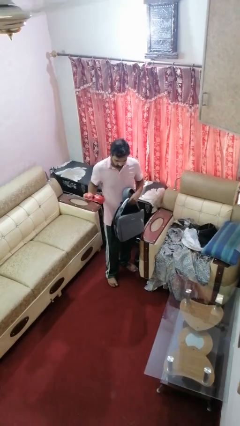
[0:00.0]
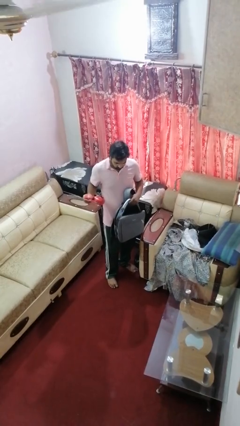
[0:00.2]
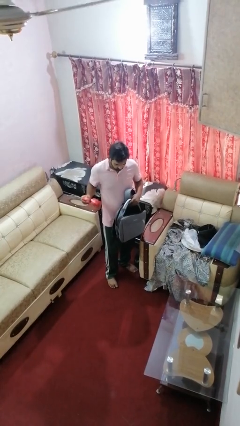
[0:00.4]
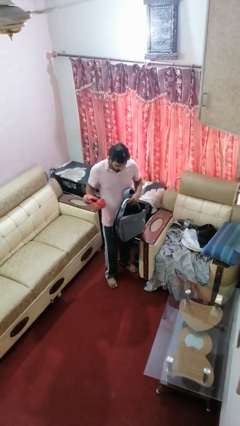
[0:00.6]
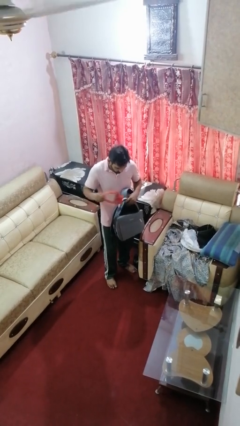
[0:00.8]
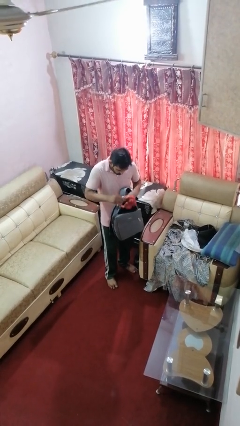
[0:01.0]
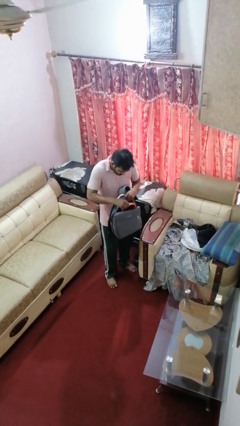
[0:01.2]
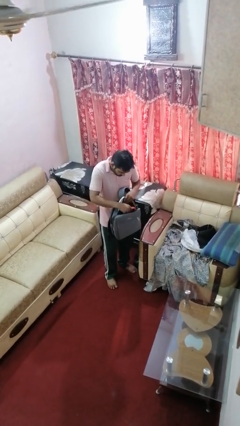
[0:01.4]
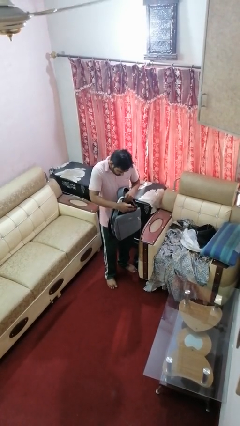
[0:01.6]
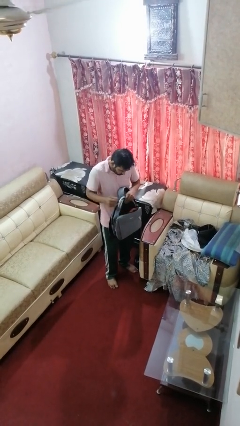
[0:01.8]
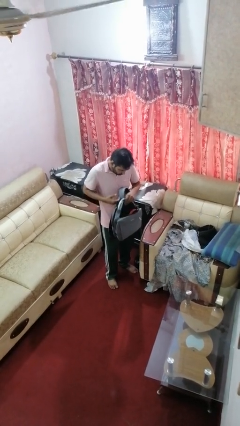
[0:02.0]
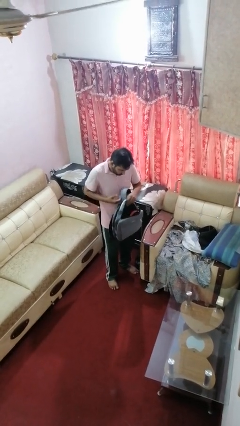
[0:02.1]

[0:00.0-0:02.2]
person puts object into backpack

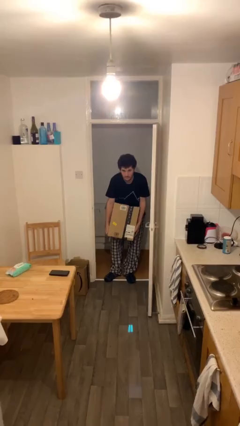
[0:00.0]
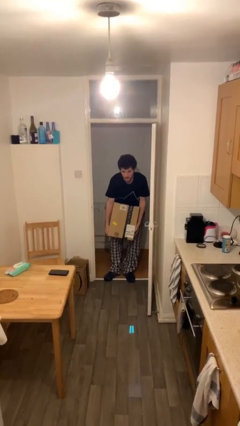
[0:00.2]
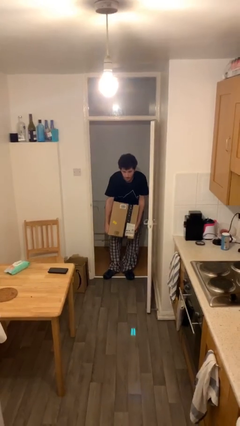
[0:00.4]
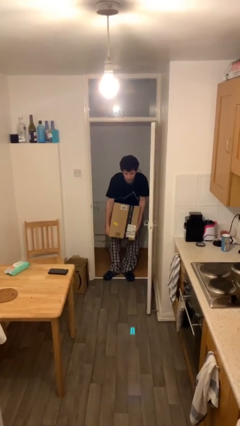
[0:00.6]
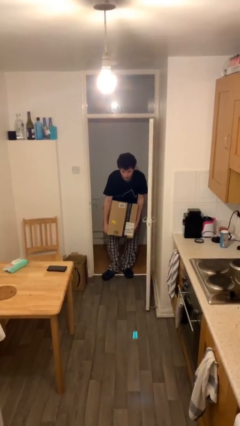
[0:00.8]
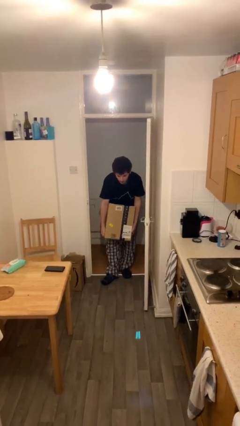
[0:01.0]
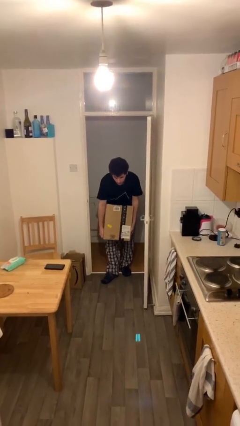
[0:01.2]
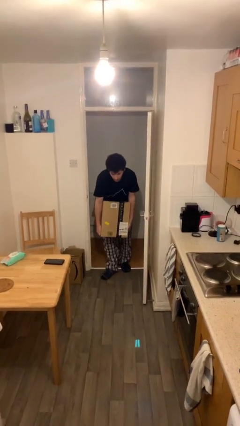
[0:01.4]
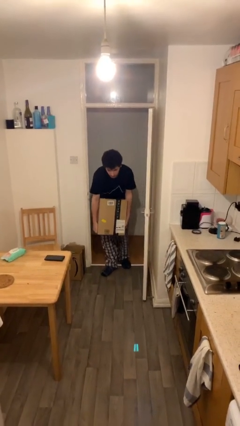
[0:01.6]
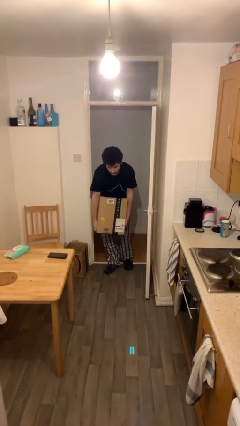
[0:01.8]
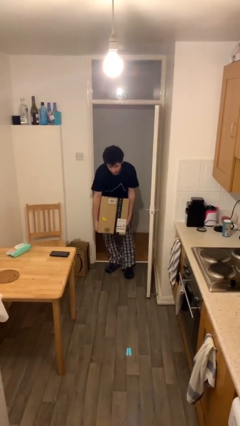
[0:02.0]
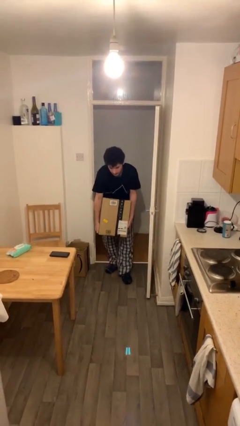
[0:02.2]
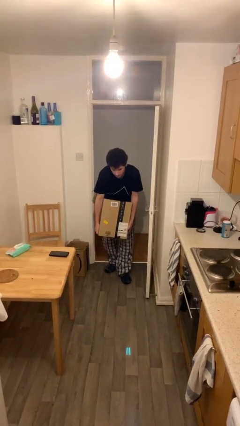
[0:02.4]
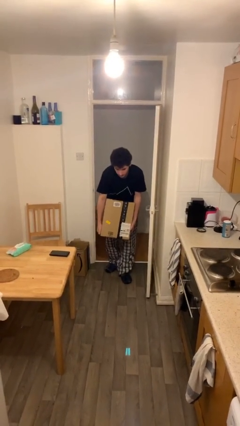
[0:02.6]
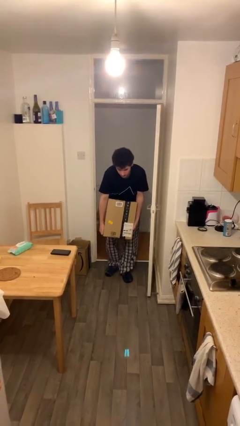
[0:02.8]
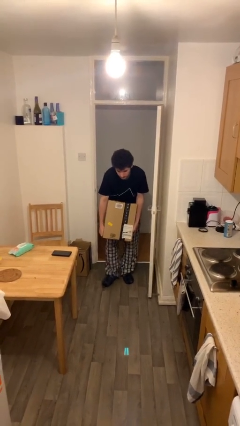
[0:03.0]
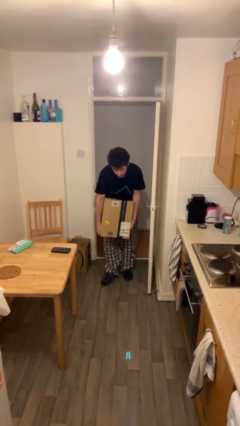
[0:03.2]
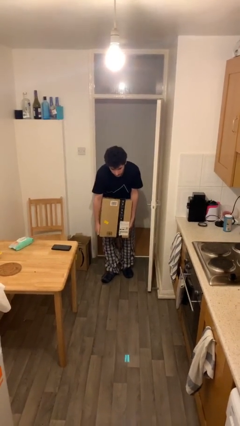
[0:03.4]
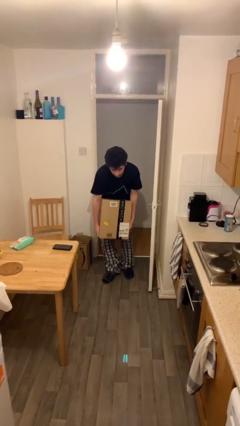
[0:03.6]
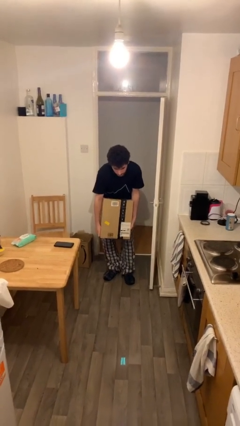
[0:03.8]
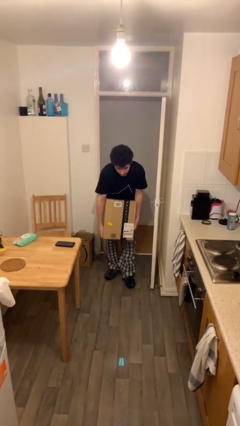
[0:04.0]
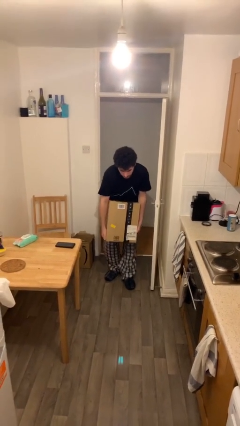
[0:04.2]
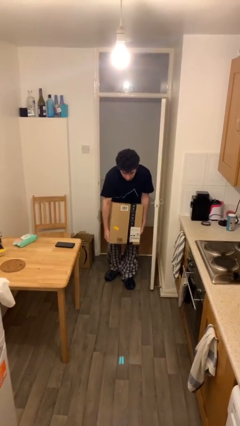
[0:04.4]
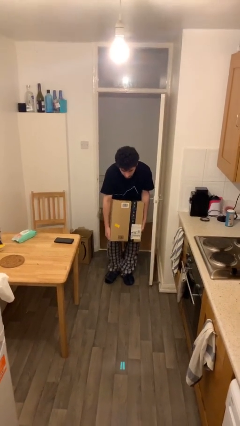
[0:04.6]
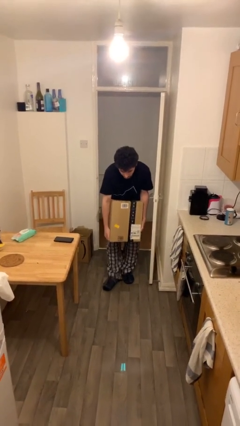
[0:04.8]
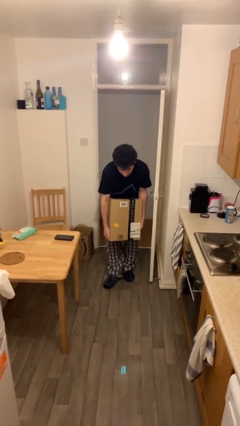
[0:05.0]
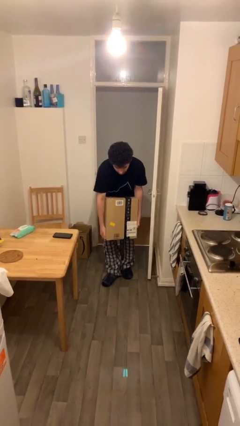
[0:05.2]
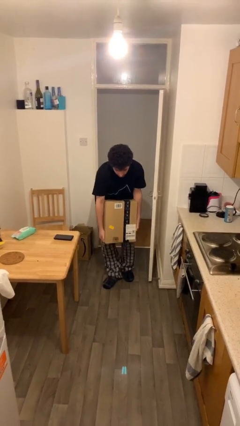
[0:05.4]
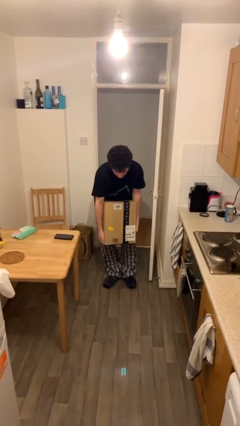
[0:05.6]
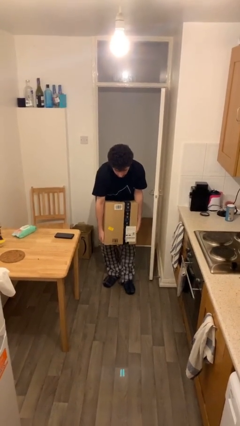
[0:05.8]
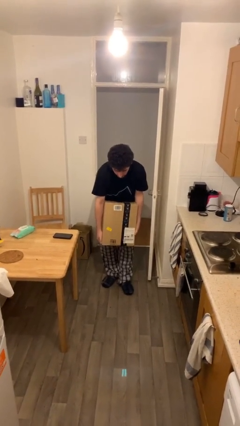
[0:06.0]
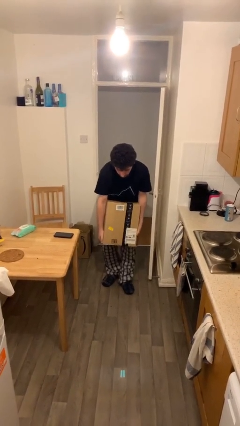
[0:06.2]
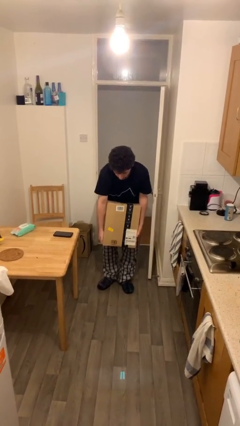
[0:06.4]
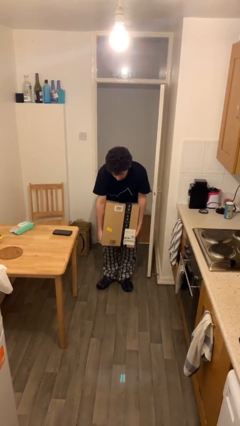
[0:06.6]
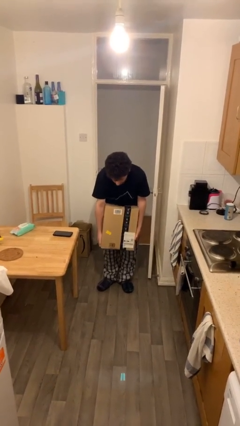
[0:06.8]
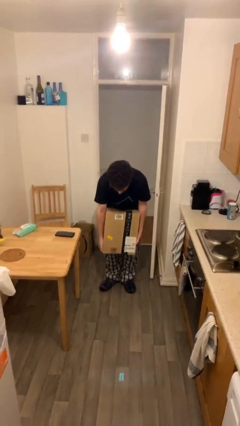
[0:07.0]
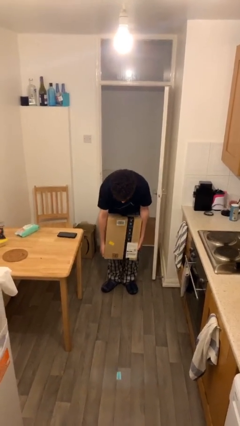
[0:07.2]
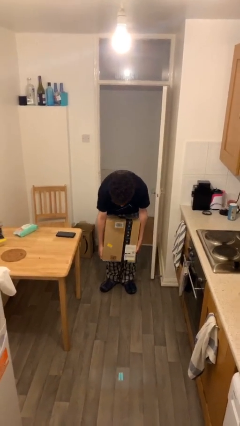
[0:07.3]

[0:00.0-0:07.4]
person carries heavy object

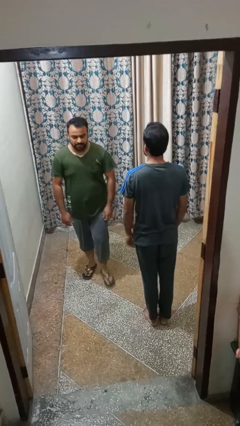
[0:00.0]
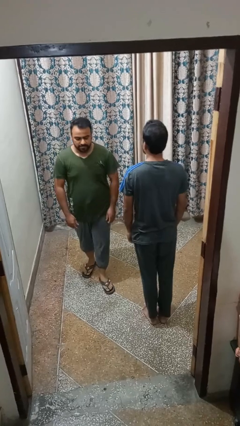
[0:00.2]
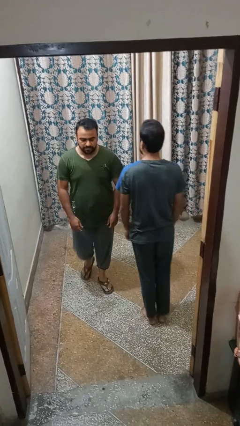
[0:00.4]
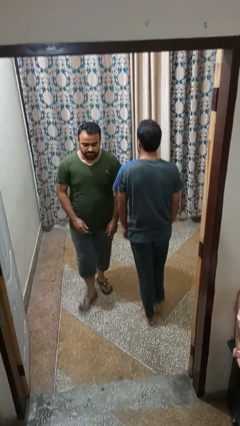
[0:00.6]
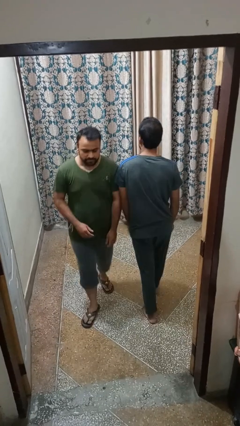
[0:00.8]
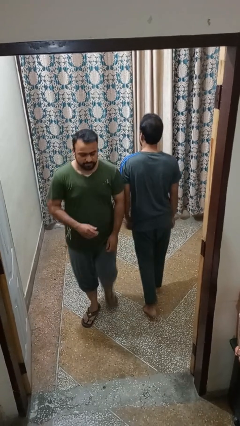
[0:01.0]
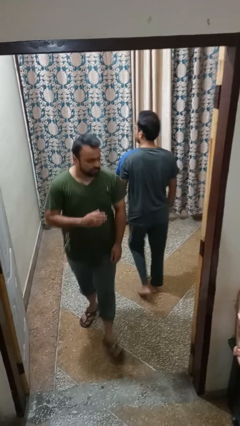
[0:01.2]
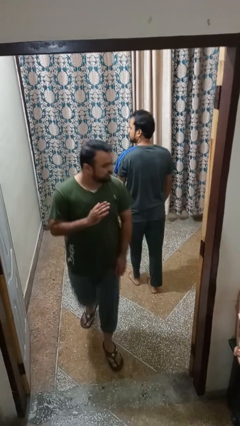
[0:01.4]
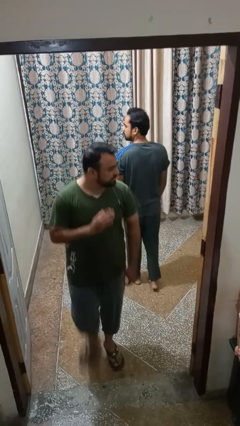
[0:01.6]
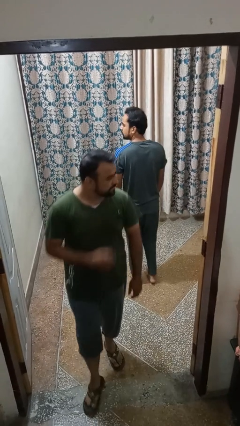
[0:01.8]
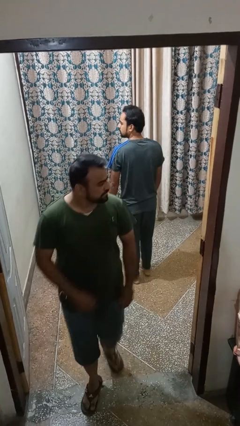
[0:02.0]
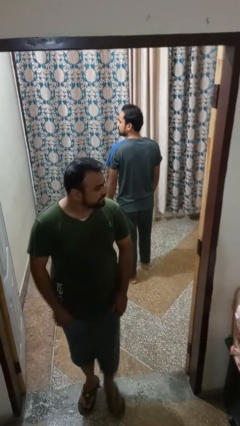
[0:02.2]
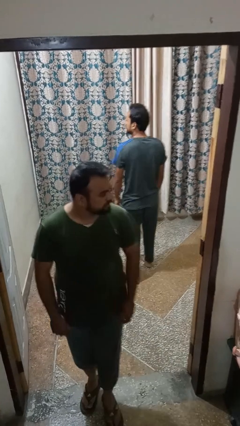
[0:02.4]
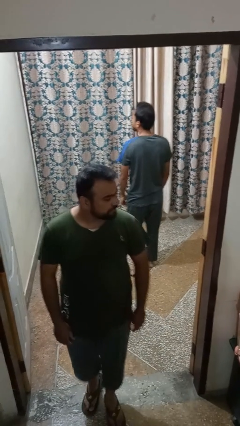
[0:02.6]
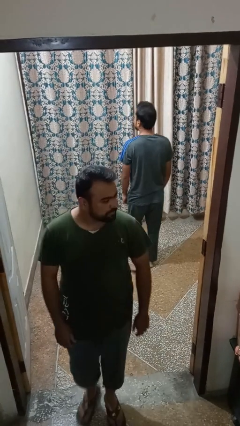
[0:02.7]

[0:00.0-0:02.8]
person bumps into person

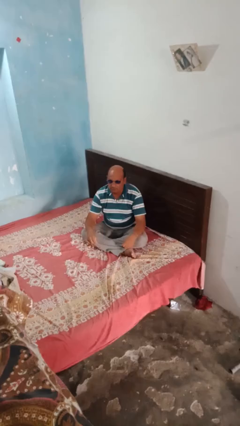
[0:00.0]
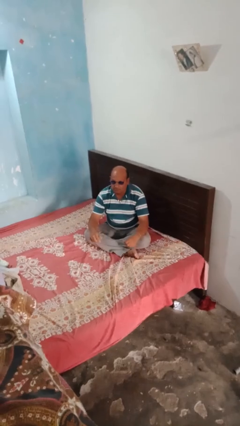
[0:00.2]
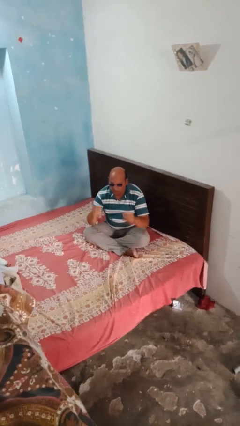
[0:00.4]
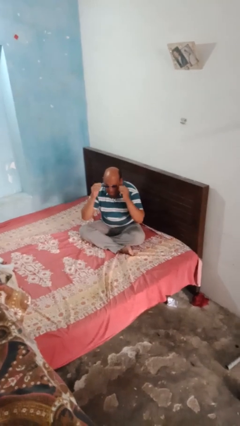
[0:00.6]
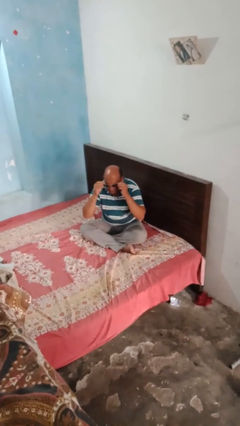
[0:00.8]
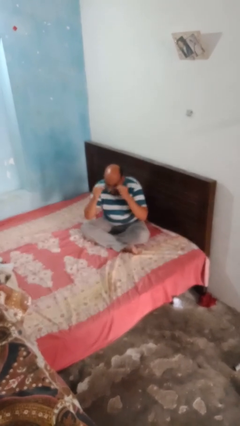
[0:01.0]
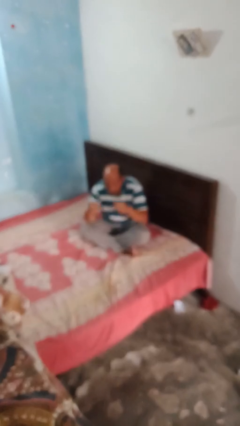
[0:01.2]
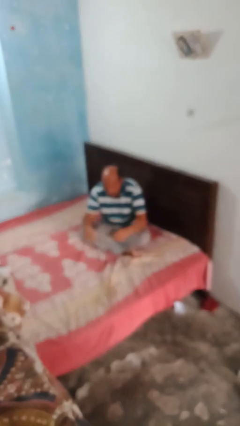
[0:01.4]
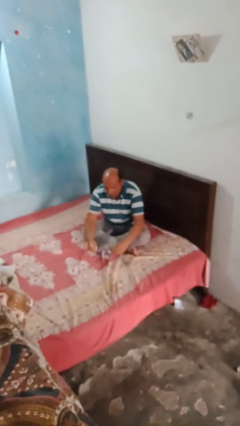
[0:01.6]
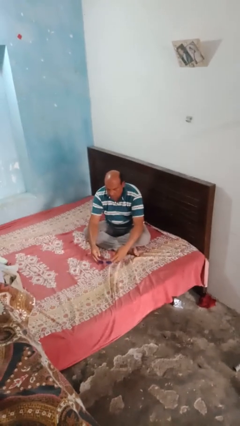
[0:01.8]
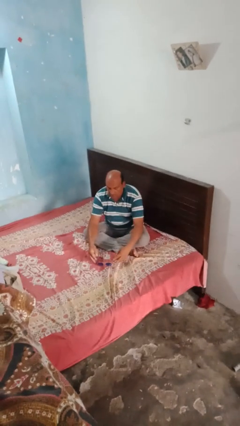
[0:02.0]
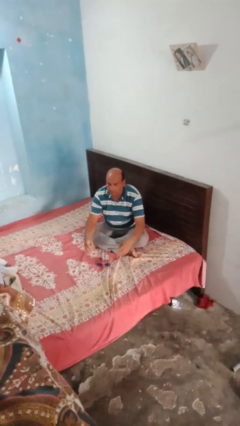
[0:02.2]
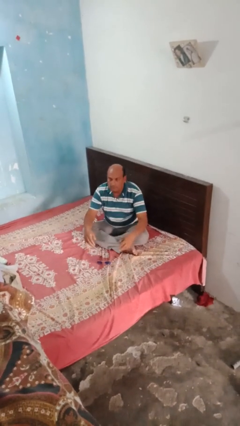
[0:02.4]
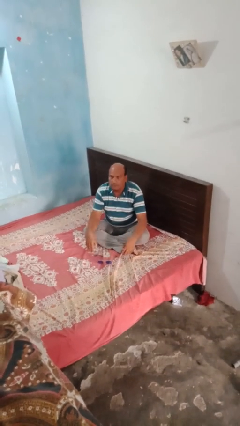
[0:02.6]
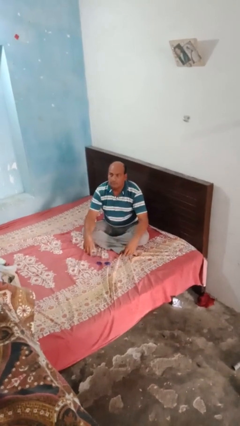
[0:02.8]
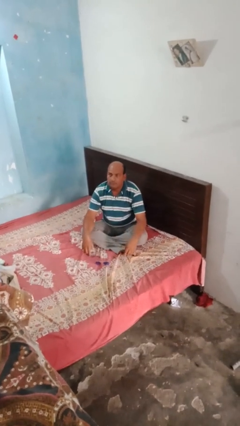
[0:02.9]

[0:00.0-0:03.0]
person takes off sunglasses

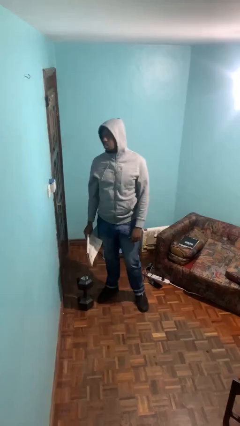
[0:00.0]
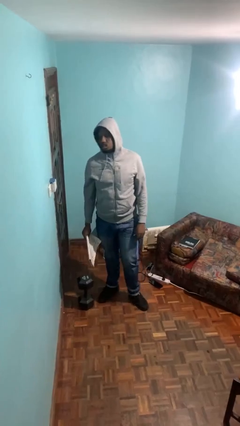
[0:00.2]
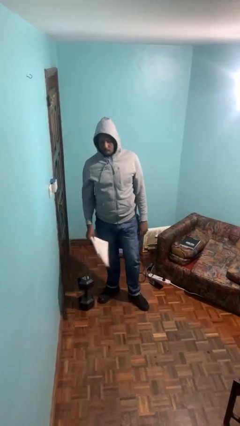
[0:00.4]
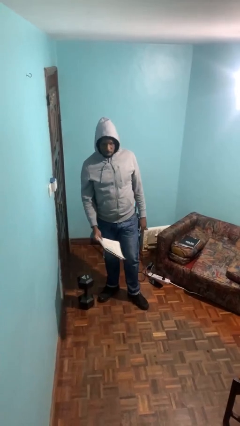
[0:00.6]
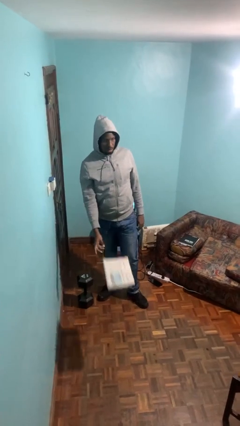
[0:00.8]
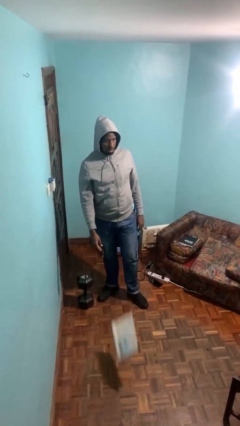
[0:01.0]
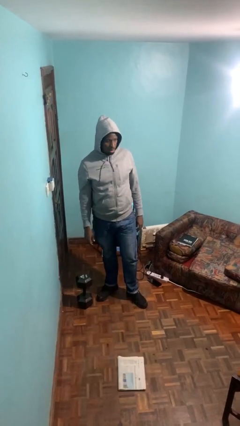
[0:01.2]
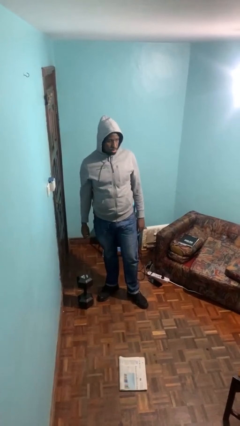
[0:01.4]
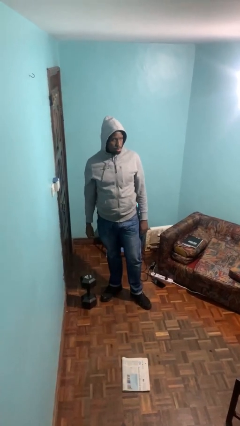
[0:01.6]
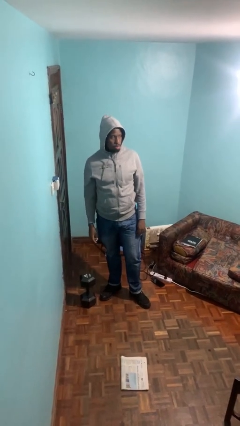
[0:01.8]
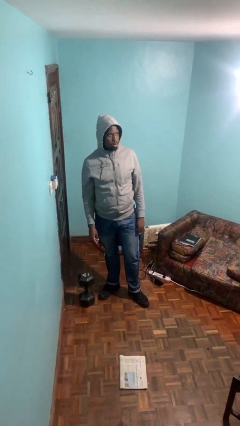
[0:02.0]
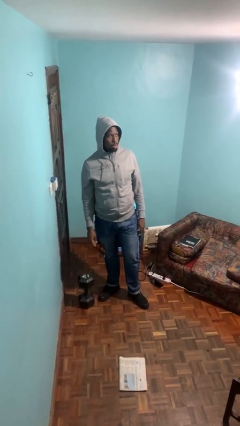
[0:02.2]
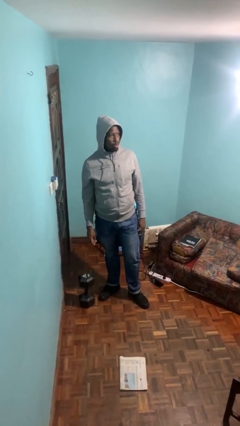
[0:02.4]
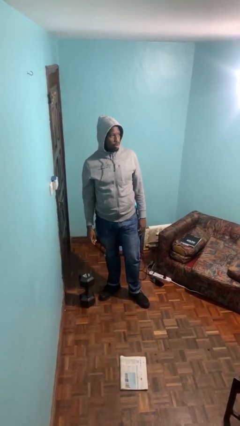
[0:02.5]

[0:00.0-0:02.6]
person drops object
